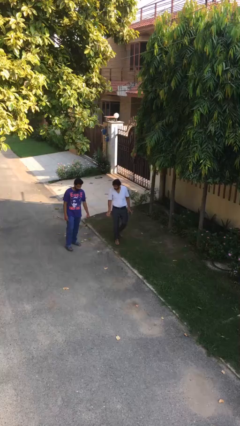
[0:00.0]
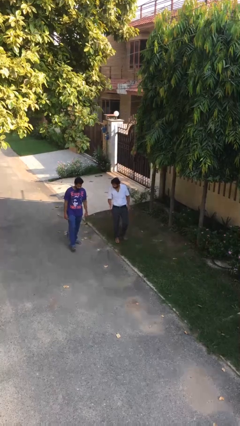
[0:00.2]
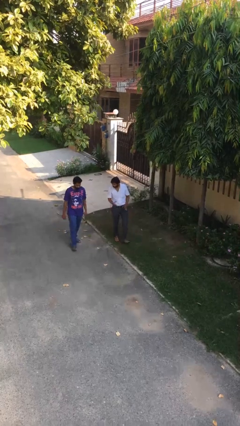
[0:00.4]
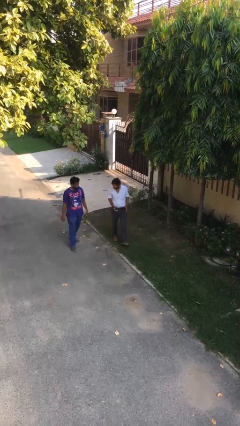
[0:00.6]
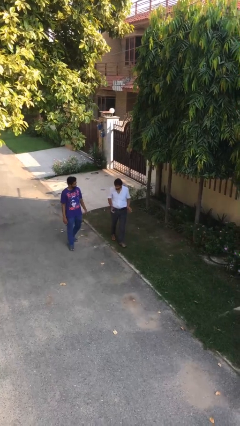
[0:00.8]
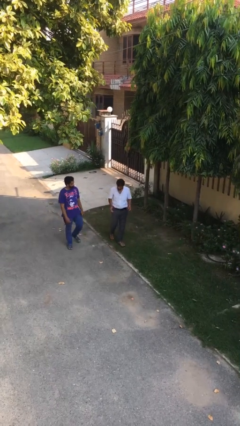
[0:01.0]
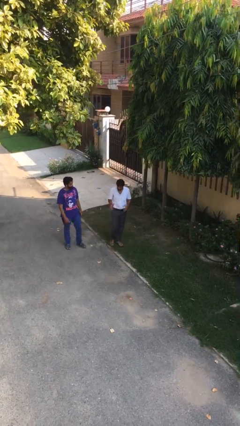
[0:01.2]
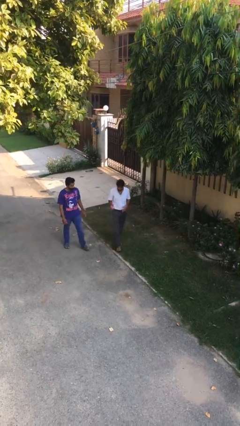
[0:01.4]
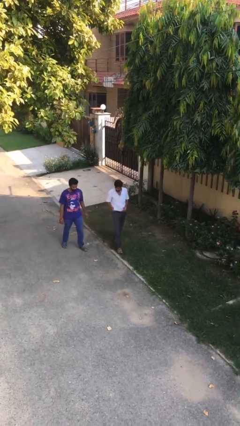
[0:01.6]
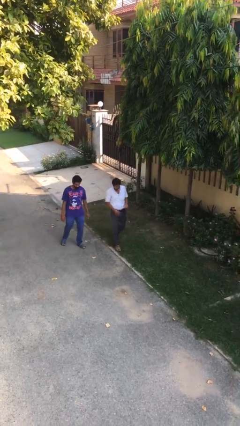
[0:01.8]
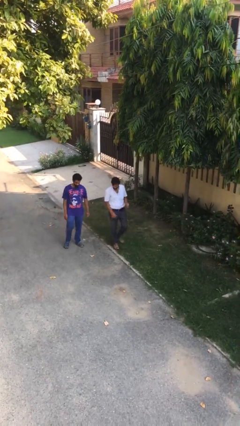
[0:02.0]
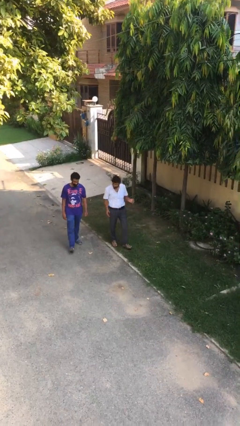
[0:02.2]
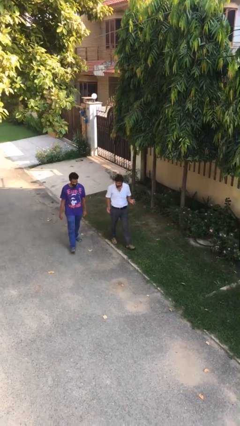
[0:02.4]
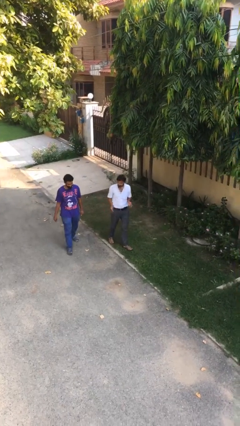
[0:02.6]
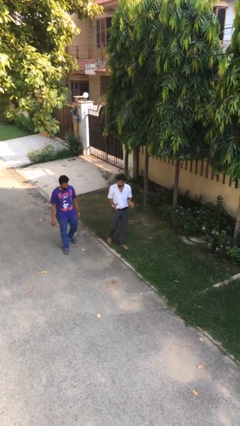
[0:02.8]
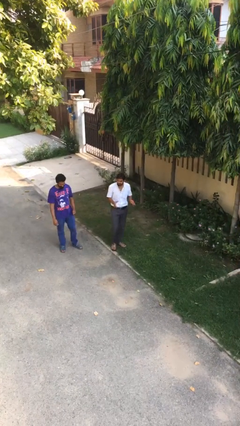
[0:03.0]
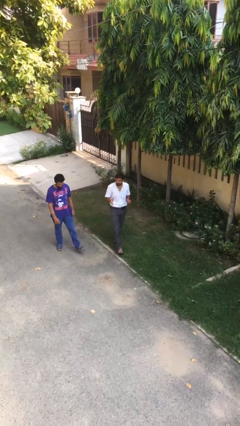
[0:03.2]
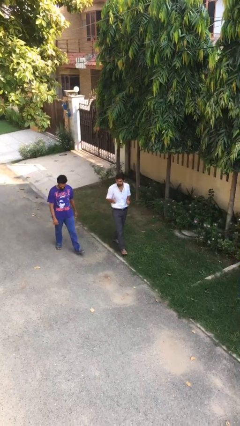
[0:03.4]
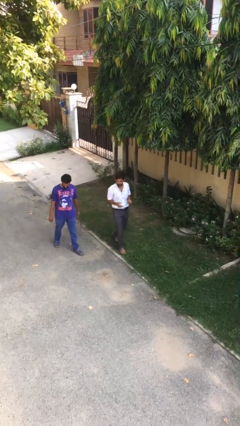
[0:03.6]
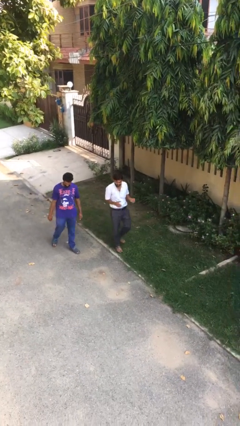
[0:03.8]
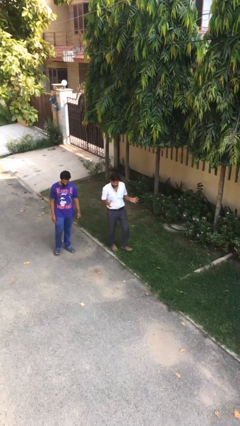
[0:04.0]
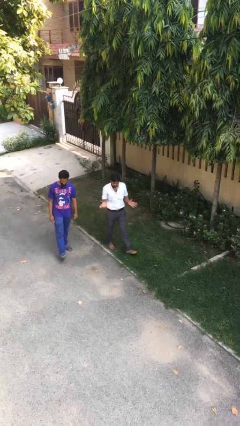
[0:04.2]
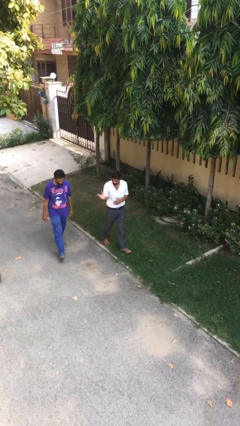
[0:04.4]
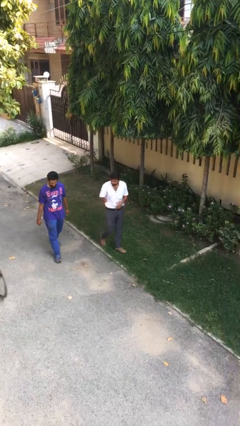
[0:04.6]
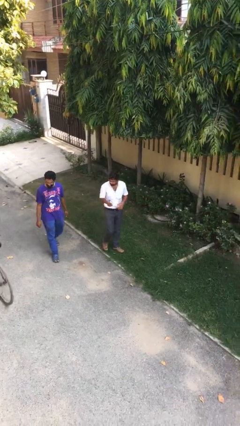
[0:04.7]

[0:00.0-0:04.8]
person talks to person

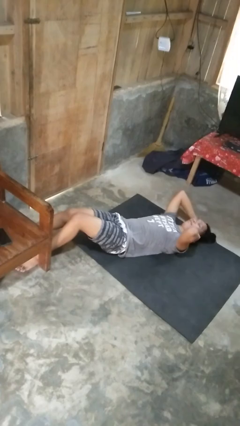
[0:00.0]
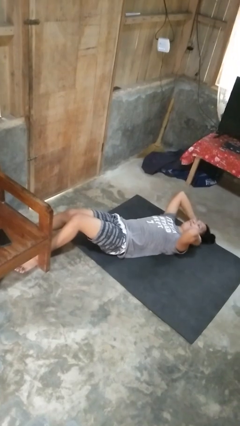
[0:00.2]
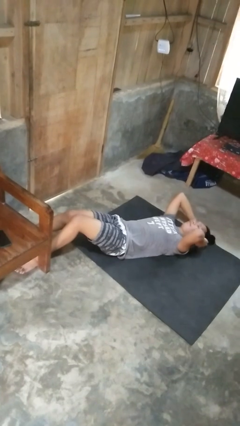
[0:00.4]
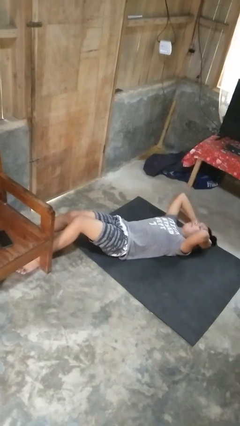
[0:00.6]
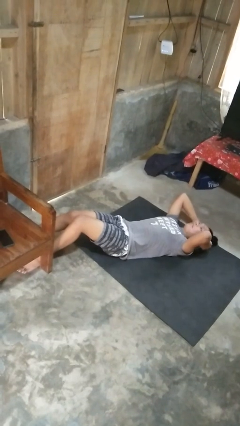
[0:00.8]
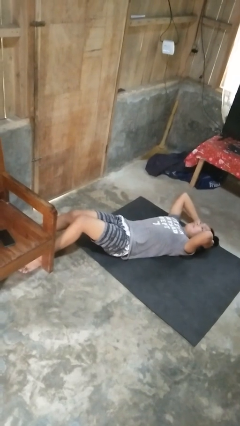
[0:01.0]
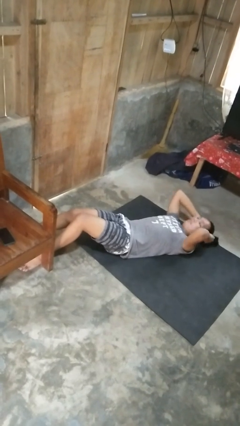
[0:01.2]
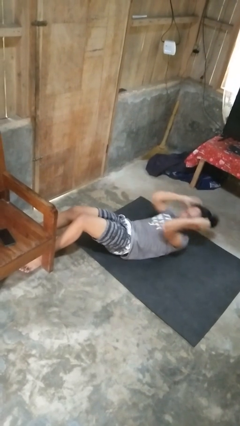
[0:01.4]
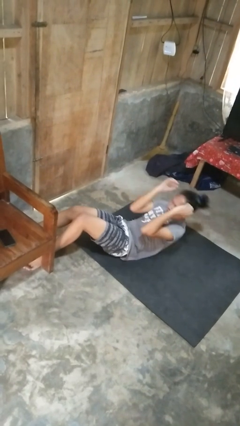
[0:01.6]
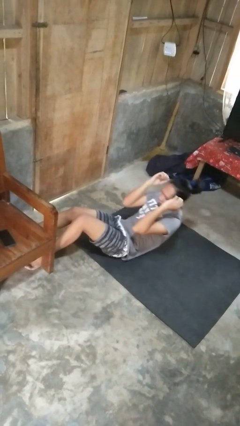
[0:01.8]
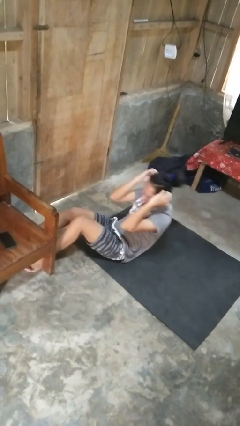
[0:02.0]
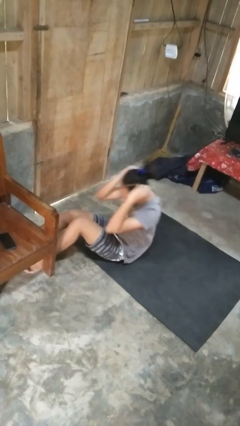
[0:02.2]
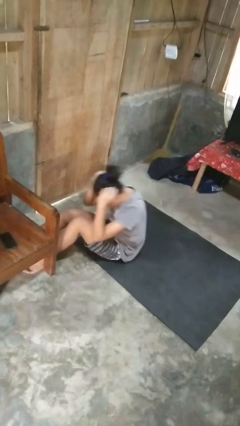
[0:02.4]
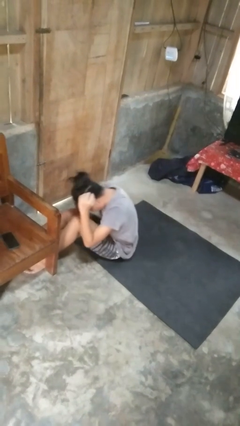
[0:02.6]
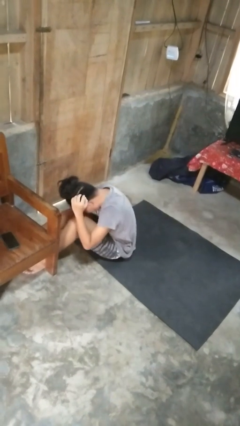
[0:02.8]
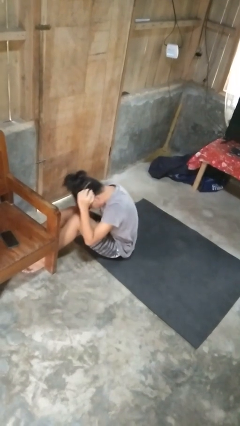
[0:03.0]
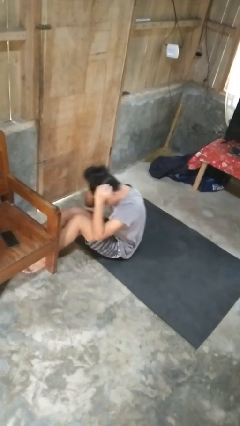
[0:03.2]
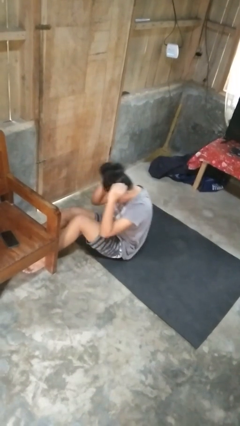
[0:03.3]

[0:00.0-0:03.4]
person exercises with situp

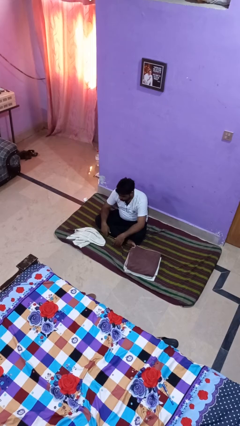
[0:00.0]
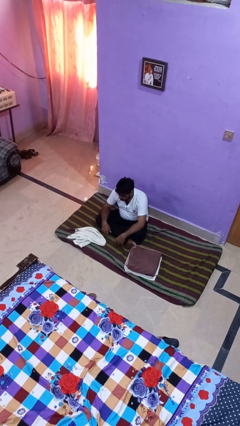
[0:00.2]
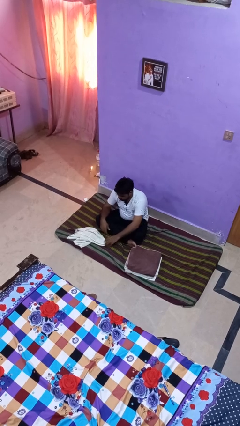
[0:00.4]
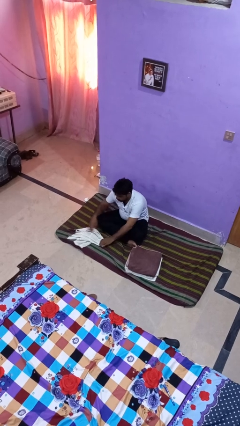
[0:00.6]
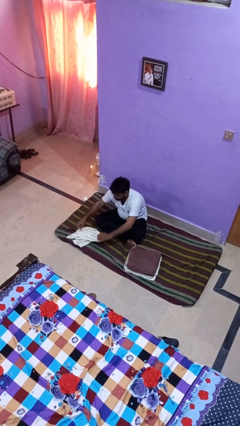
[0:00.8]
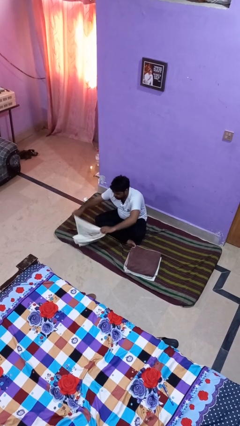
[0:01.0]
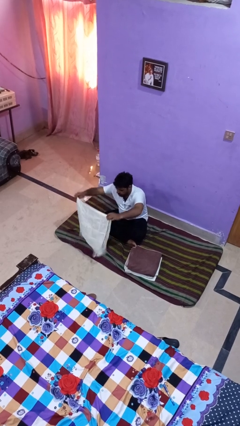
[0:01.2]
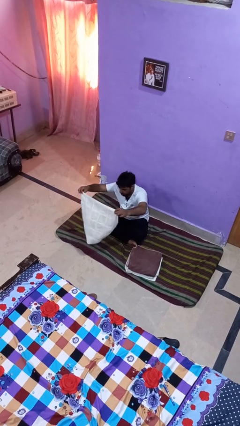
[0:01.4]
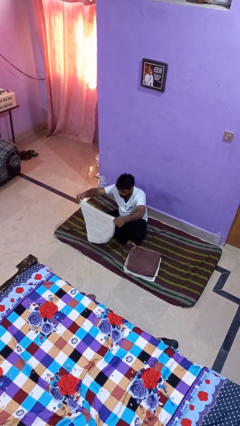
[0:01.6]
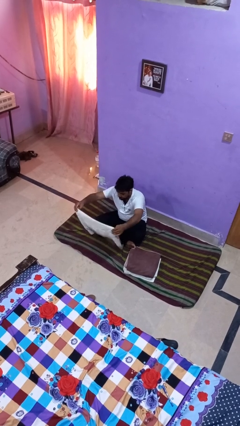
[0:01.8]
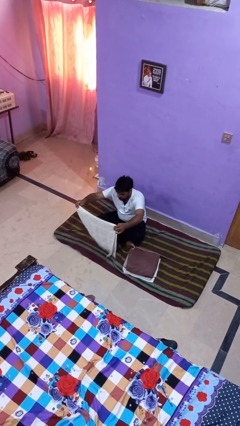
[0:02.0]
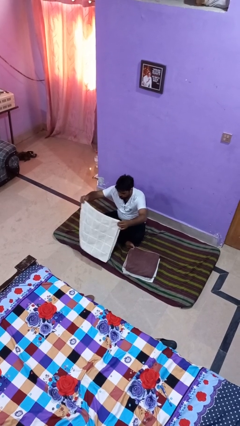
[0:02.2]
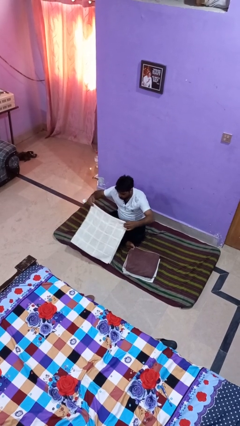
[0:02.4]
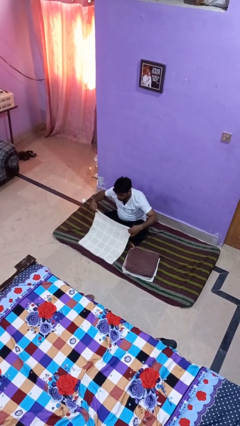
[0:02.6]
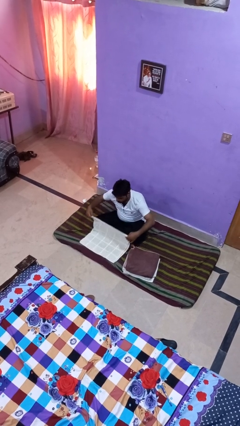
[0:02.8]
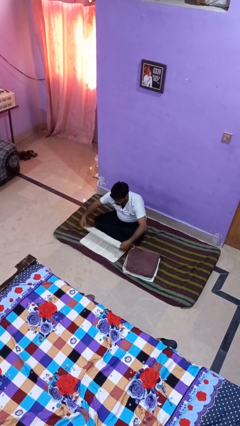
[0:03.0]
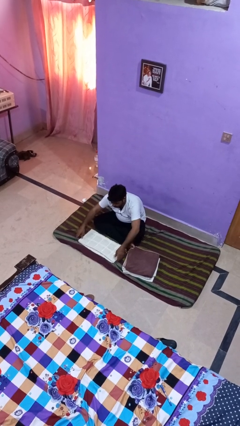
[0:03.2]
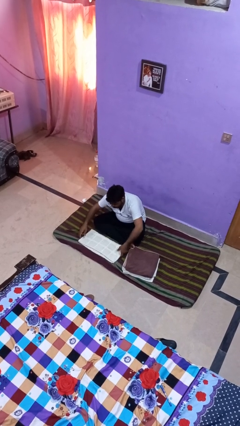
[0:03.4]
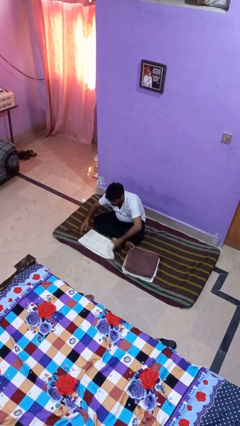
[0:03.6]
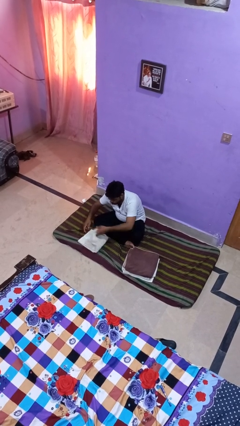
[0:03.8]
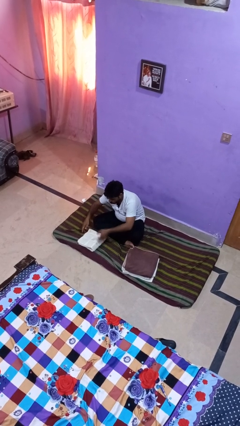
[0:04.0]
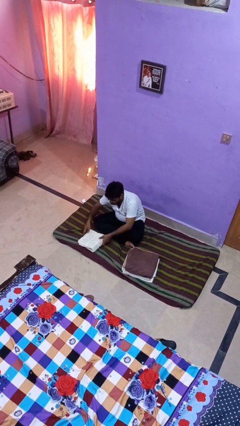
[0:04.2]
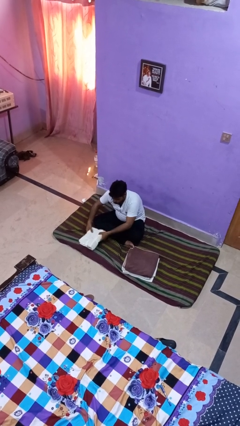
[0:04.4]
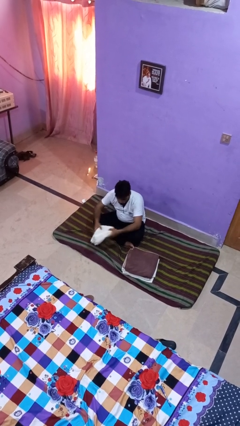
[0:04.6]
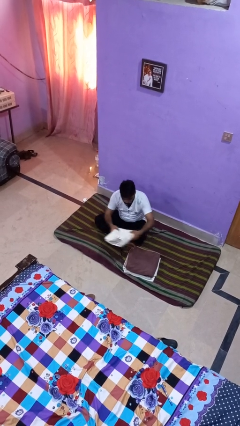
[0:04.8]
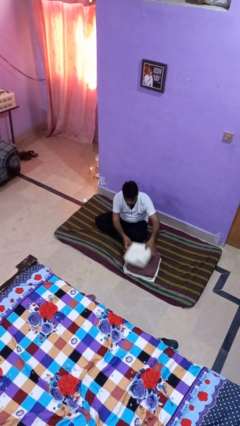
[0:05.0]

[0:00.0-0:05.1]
person folds towel

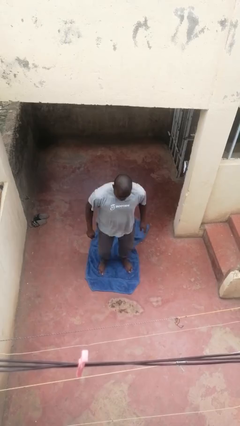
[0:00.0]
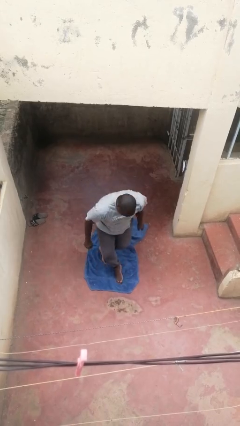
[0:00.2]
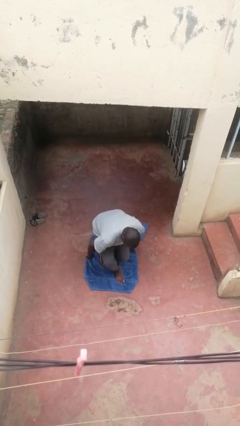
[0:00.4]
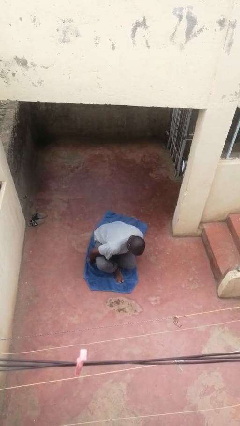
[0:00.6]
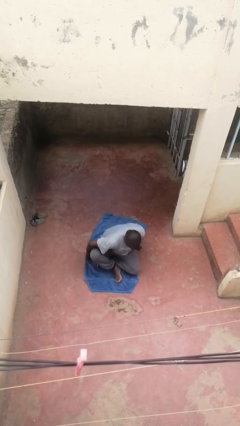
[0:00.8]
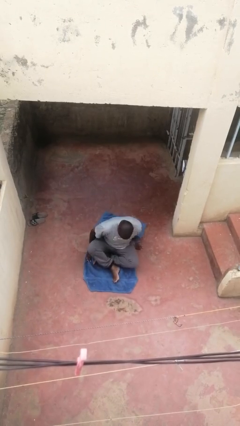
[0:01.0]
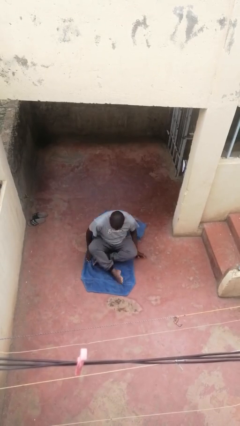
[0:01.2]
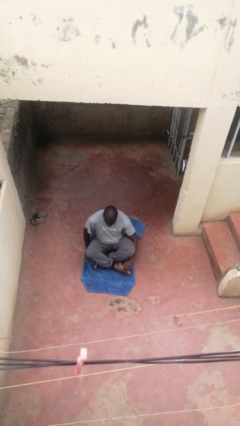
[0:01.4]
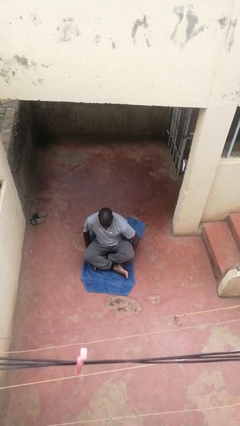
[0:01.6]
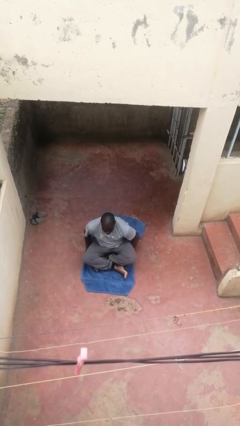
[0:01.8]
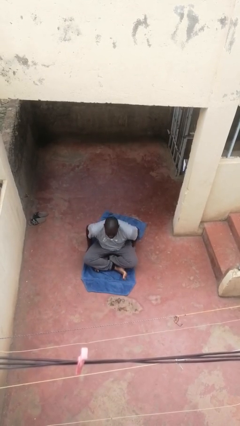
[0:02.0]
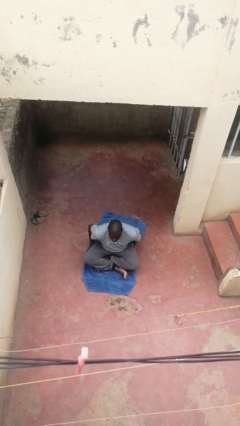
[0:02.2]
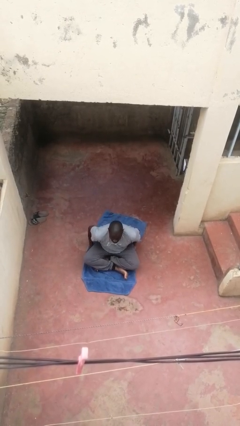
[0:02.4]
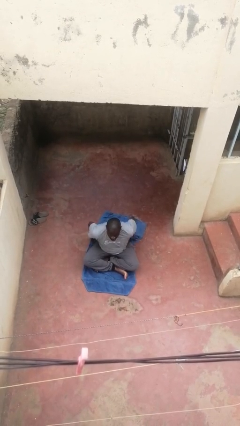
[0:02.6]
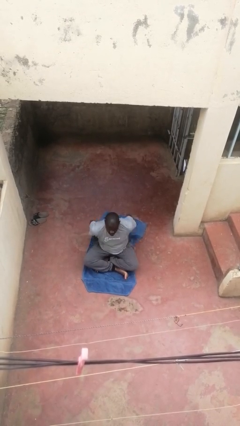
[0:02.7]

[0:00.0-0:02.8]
person sits crisscross

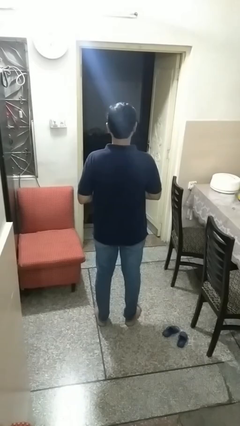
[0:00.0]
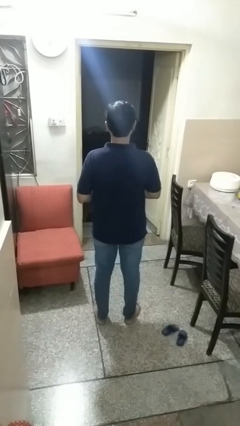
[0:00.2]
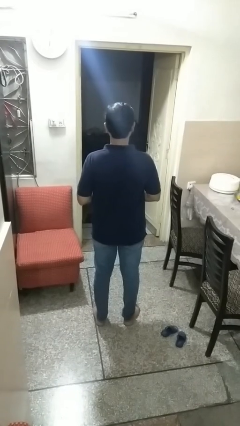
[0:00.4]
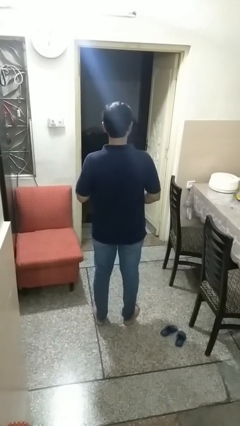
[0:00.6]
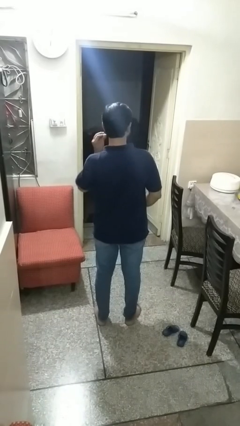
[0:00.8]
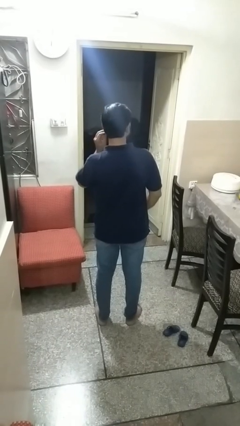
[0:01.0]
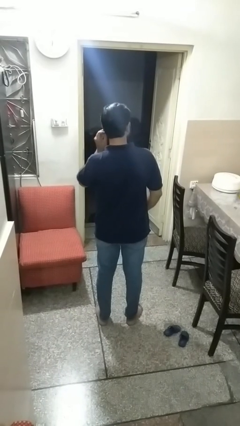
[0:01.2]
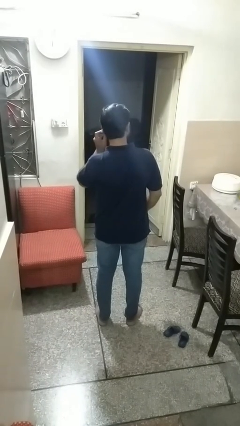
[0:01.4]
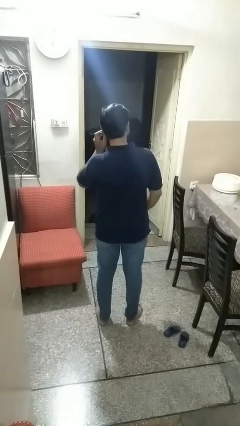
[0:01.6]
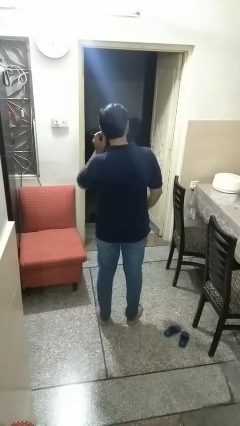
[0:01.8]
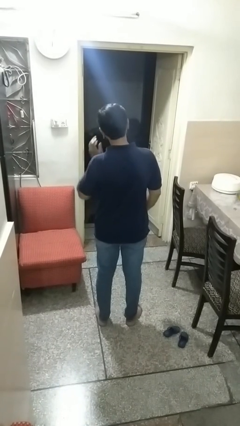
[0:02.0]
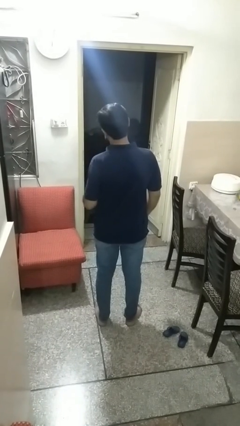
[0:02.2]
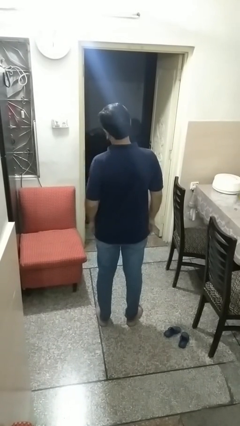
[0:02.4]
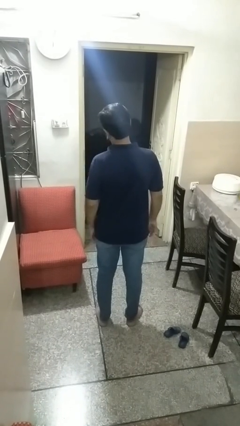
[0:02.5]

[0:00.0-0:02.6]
person puts on earrings
